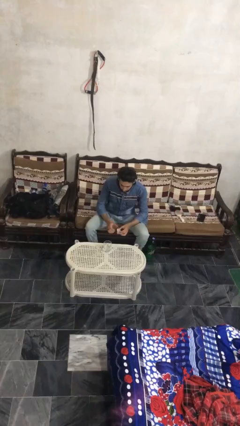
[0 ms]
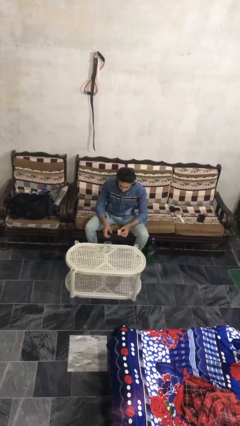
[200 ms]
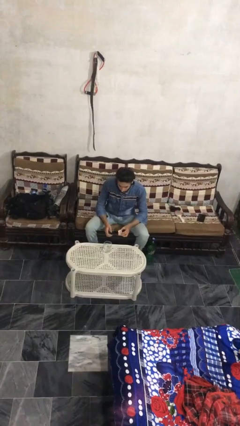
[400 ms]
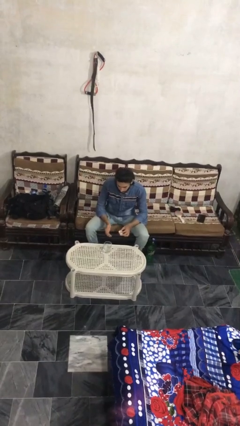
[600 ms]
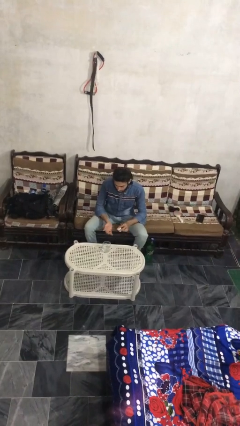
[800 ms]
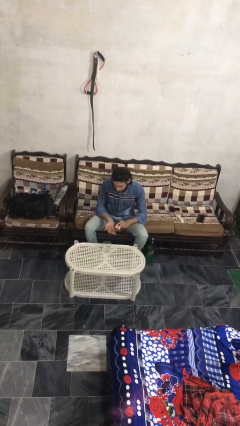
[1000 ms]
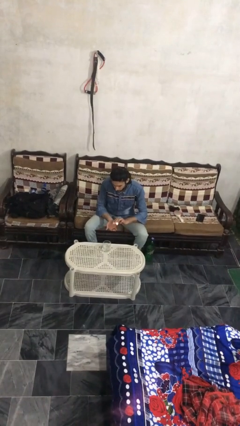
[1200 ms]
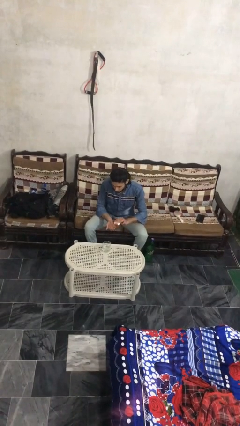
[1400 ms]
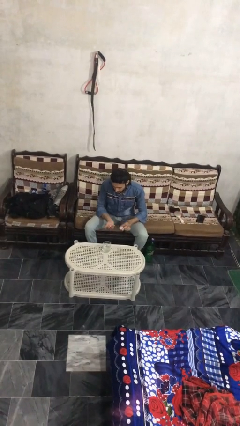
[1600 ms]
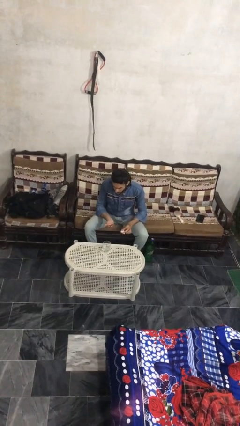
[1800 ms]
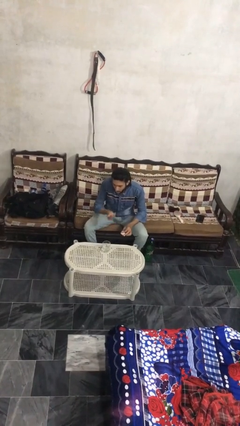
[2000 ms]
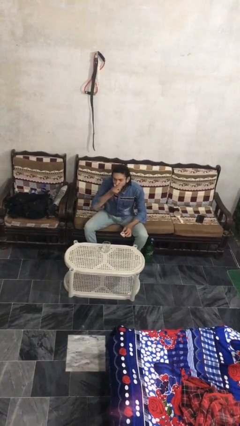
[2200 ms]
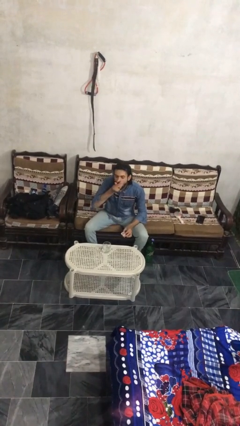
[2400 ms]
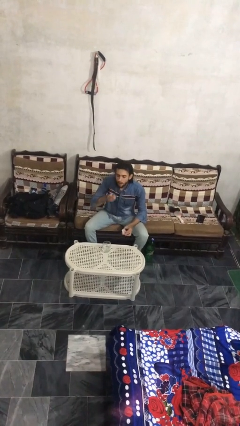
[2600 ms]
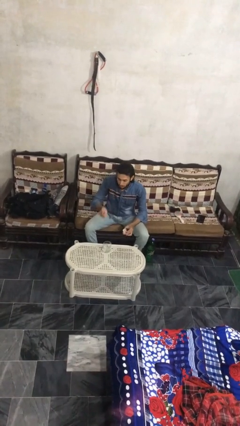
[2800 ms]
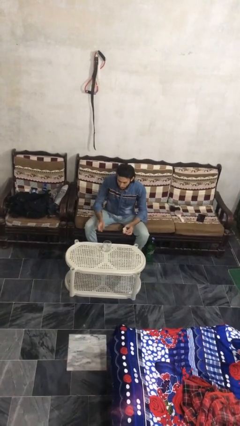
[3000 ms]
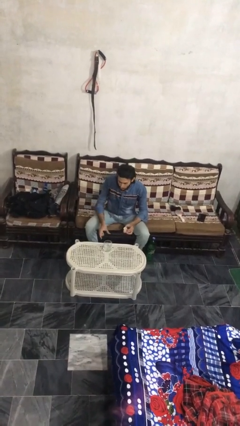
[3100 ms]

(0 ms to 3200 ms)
person takes medicine pills

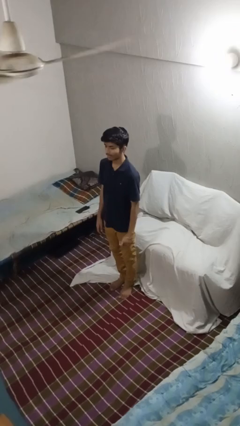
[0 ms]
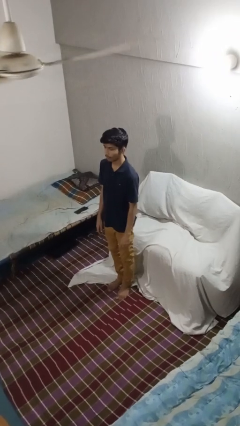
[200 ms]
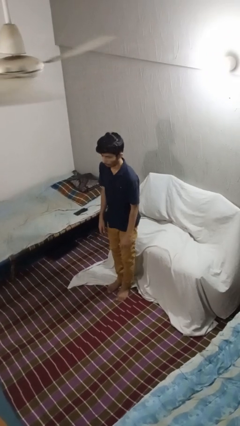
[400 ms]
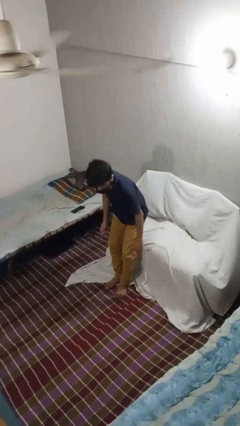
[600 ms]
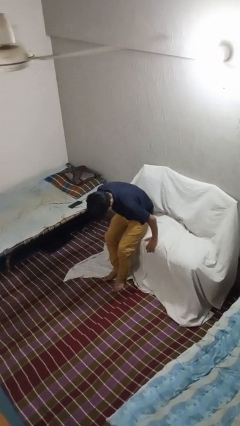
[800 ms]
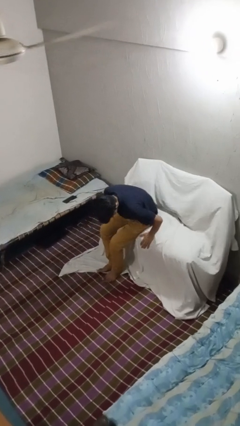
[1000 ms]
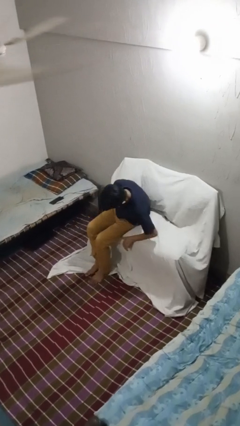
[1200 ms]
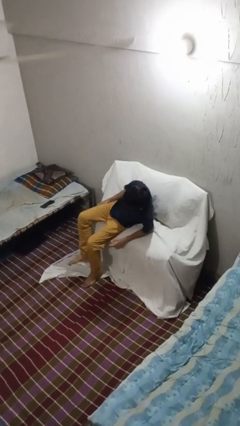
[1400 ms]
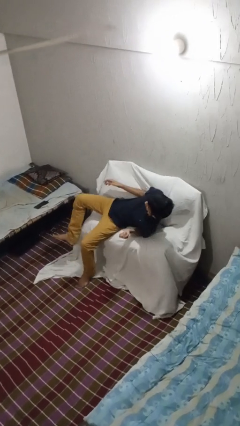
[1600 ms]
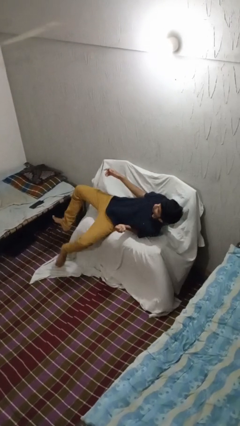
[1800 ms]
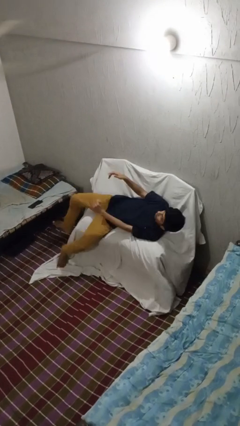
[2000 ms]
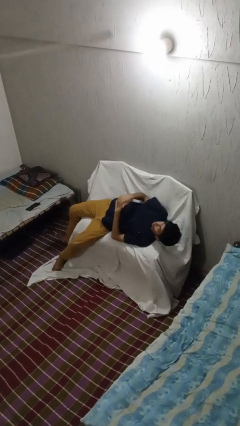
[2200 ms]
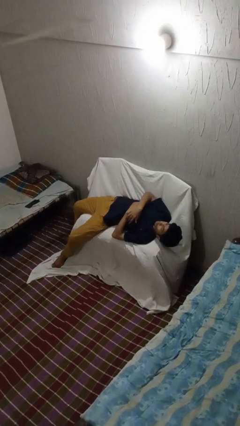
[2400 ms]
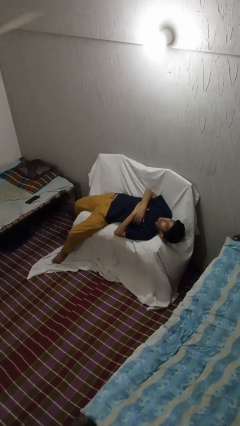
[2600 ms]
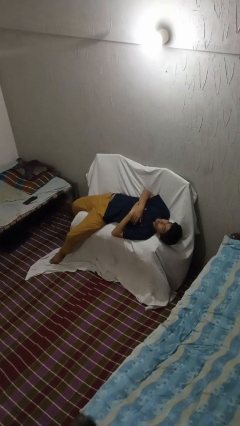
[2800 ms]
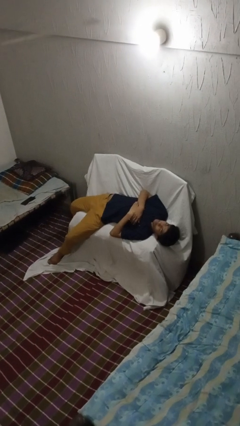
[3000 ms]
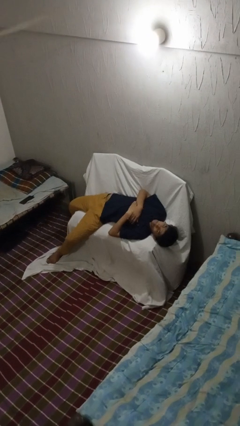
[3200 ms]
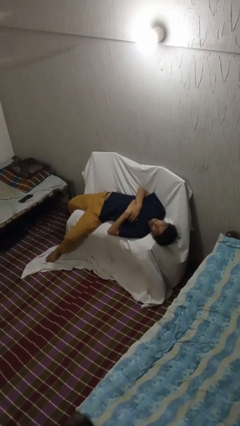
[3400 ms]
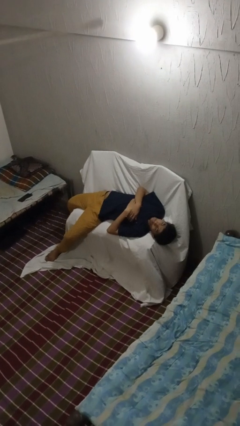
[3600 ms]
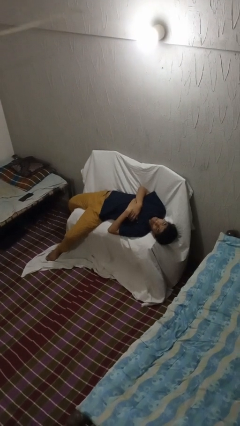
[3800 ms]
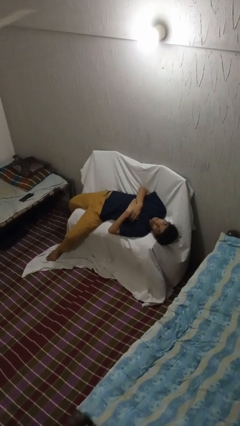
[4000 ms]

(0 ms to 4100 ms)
person lies down on couch

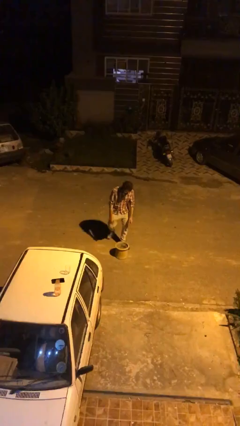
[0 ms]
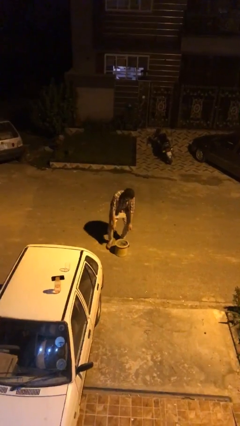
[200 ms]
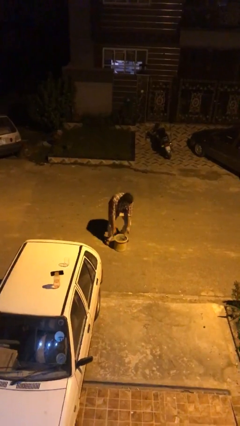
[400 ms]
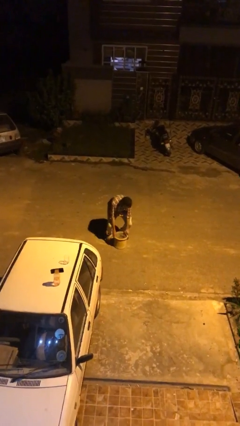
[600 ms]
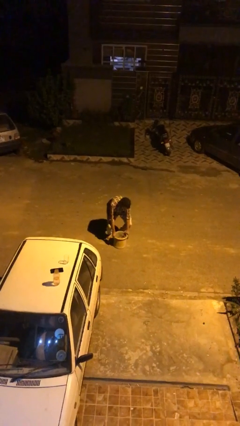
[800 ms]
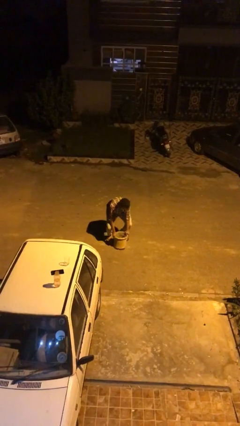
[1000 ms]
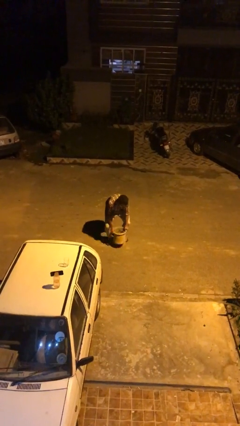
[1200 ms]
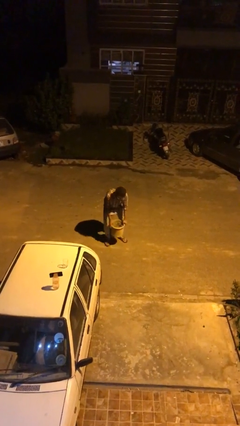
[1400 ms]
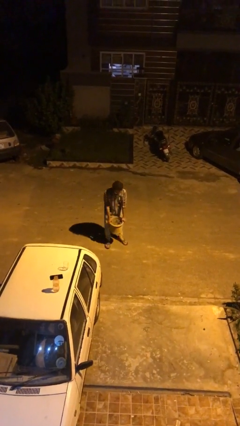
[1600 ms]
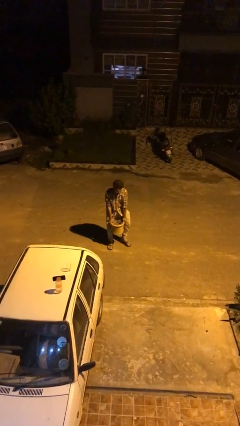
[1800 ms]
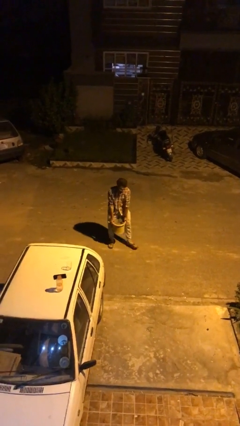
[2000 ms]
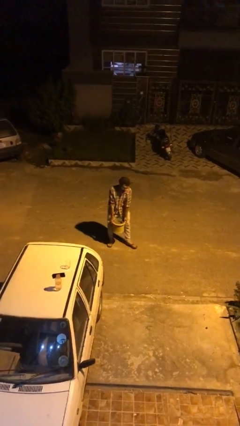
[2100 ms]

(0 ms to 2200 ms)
person picks up object from floor

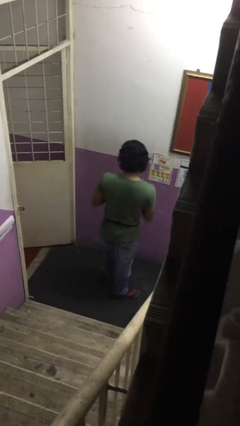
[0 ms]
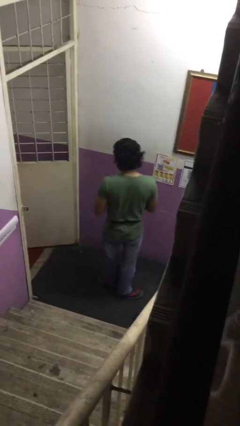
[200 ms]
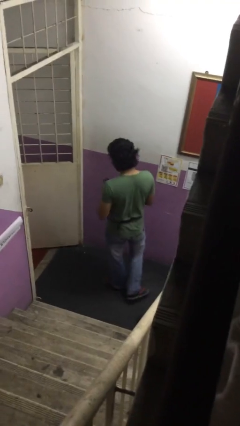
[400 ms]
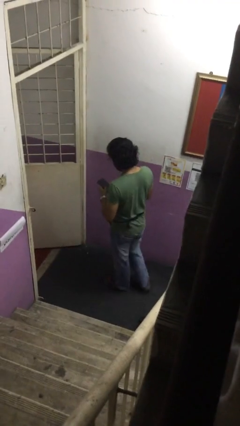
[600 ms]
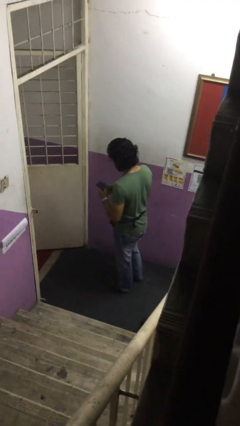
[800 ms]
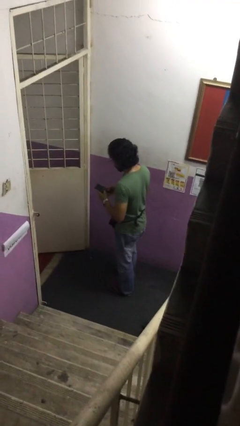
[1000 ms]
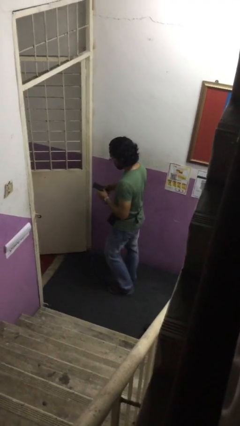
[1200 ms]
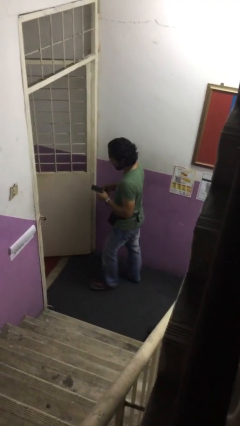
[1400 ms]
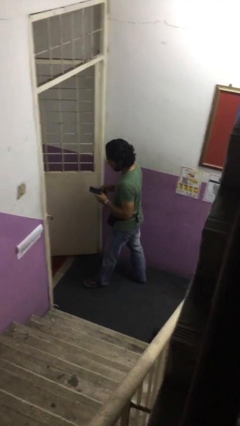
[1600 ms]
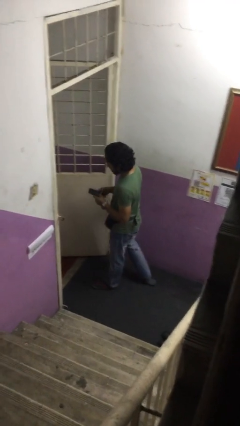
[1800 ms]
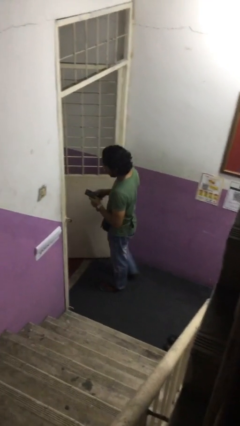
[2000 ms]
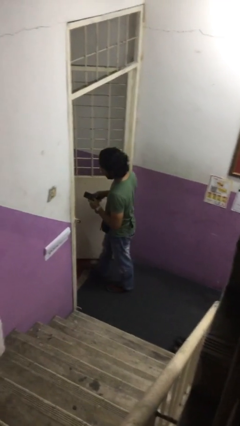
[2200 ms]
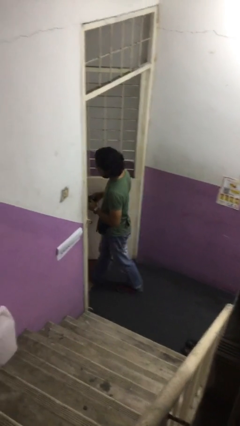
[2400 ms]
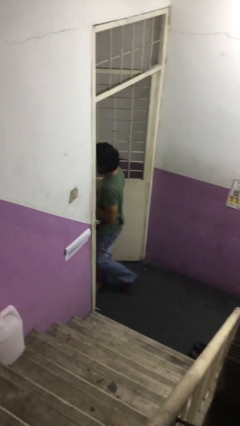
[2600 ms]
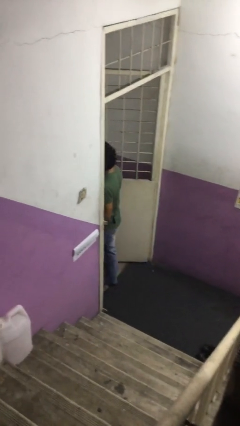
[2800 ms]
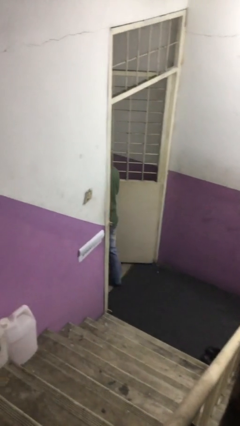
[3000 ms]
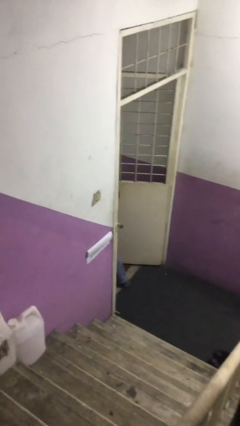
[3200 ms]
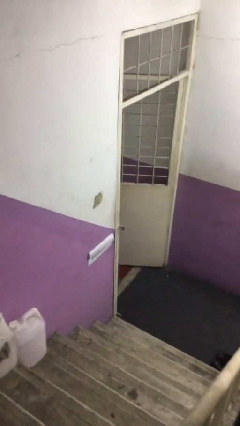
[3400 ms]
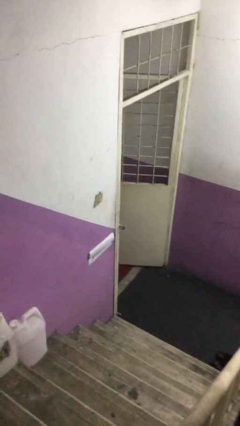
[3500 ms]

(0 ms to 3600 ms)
person exits scene through structure

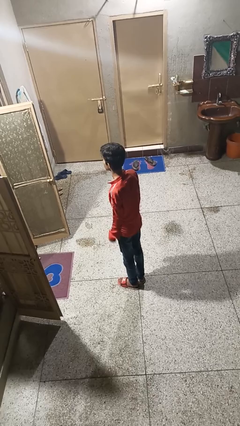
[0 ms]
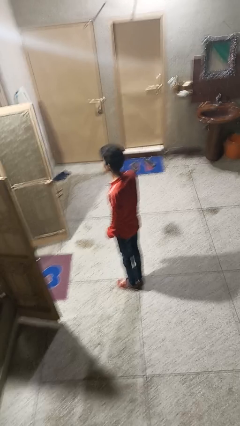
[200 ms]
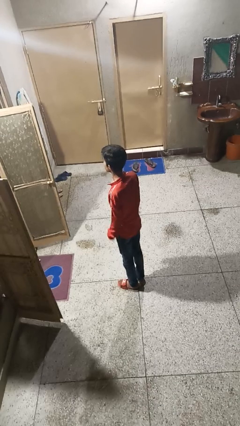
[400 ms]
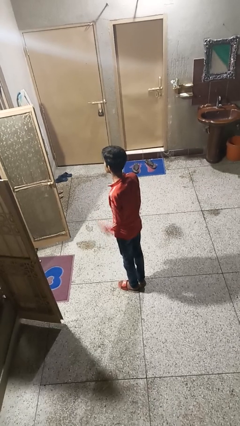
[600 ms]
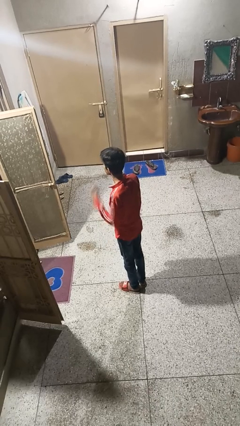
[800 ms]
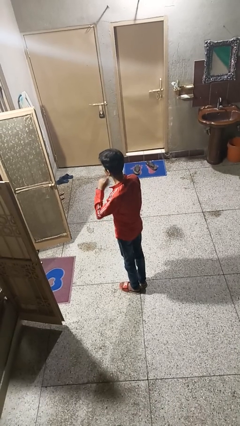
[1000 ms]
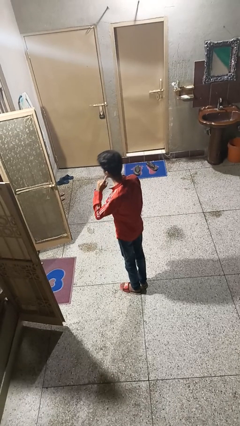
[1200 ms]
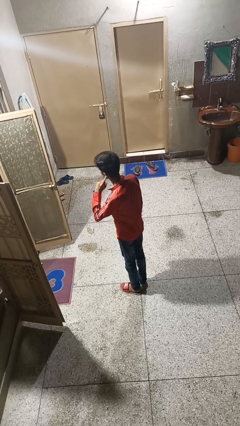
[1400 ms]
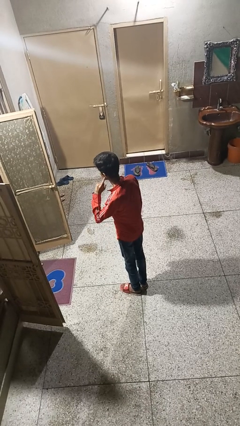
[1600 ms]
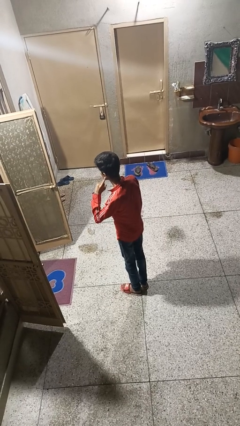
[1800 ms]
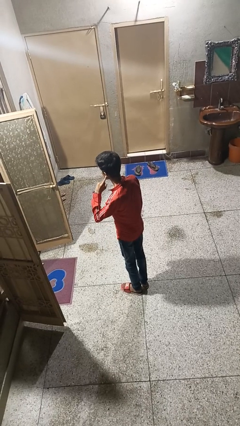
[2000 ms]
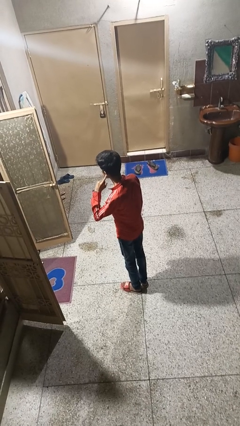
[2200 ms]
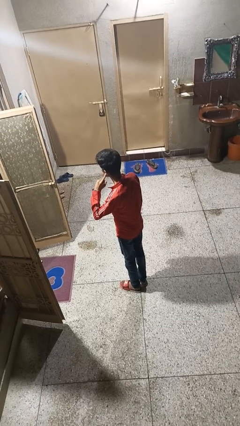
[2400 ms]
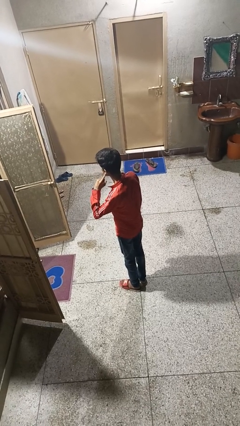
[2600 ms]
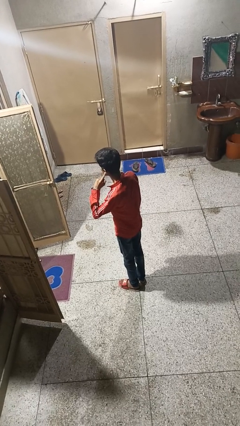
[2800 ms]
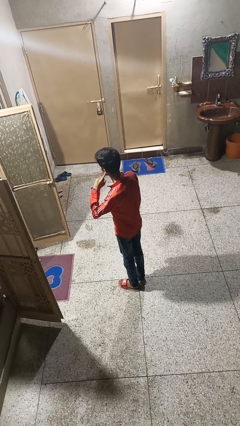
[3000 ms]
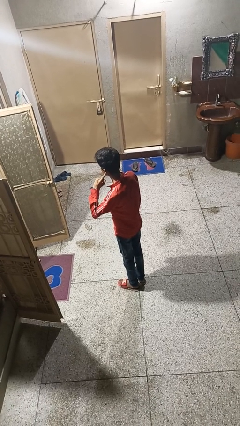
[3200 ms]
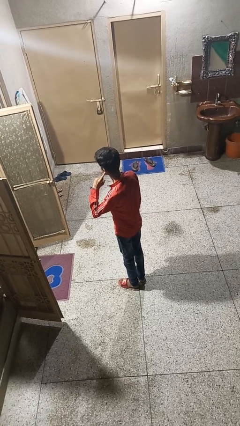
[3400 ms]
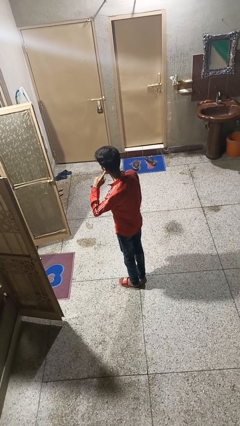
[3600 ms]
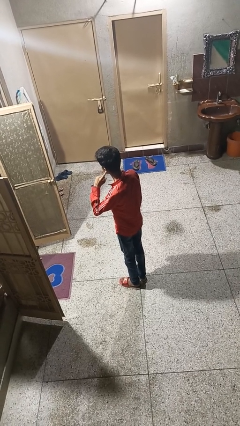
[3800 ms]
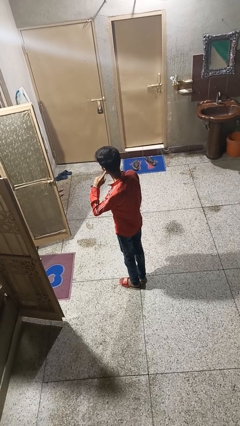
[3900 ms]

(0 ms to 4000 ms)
person gestures listen closely

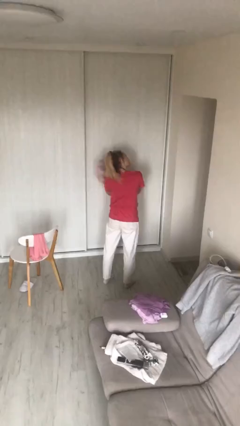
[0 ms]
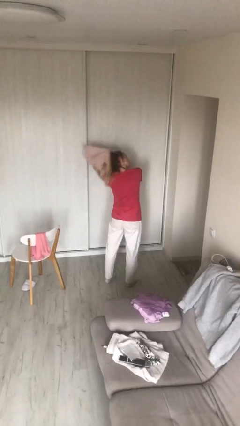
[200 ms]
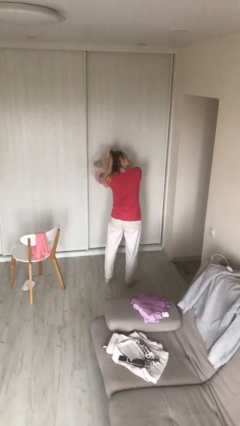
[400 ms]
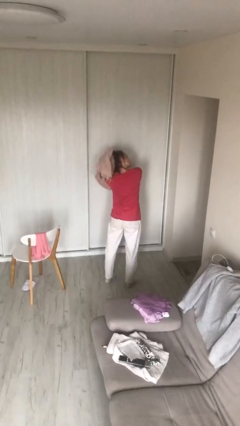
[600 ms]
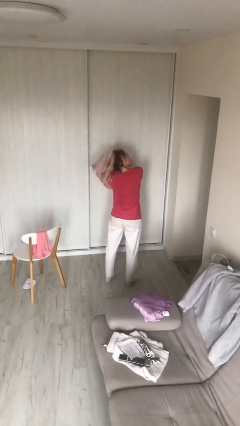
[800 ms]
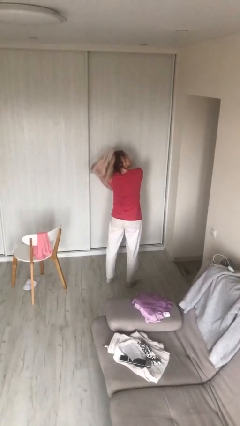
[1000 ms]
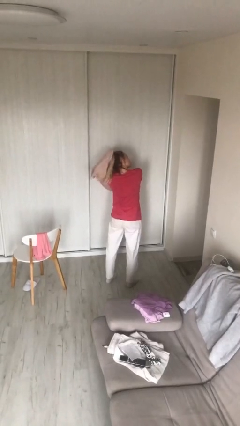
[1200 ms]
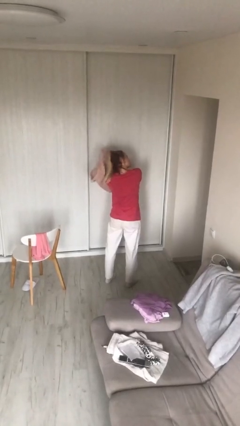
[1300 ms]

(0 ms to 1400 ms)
person dries hair with towel
